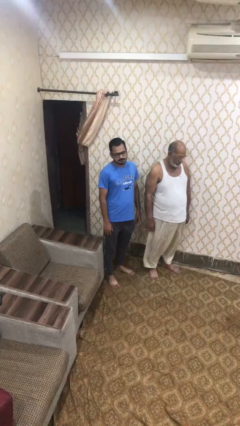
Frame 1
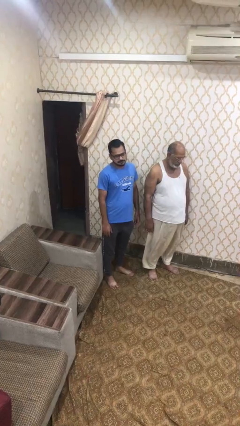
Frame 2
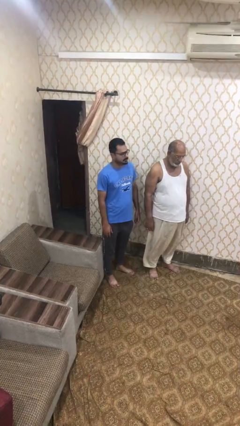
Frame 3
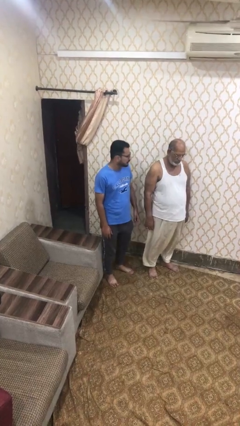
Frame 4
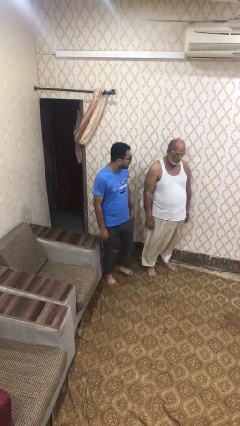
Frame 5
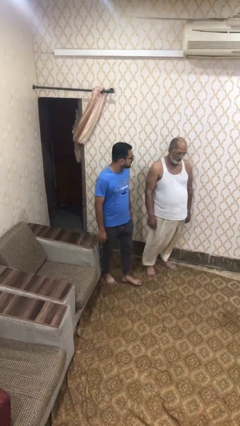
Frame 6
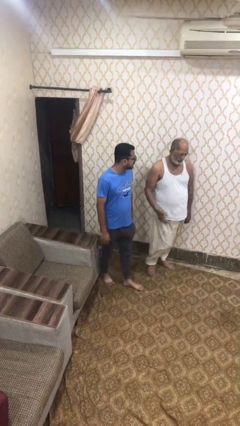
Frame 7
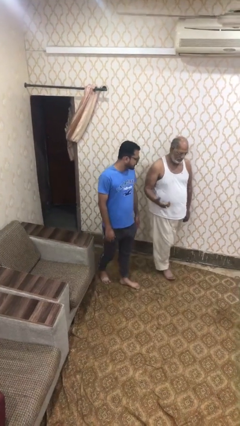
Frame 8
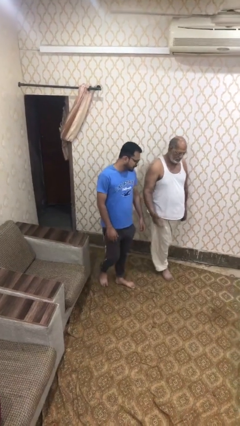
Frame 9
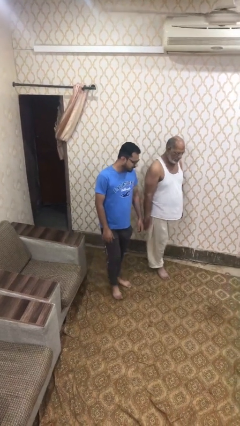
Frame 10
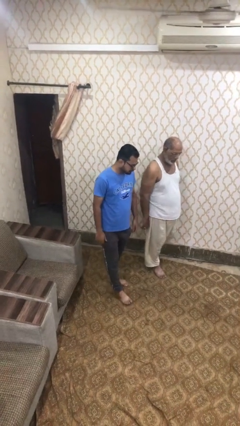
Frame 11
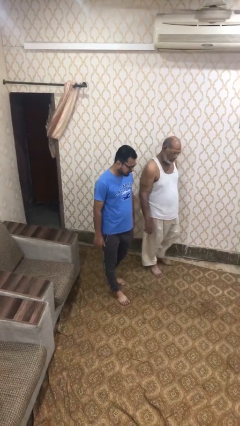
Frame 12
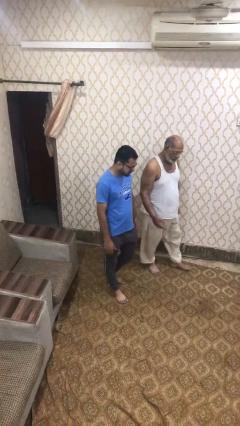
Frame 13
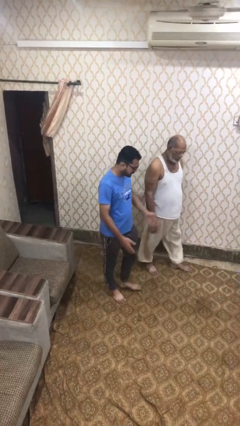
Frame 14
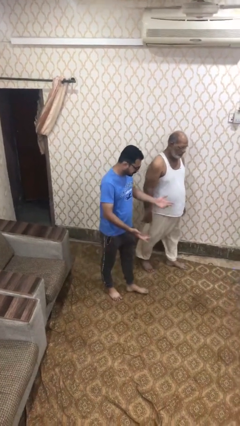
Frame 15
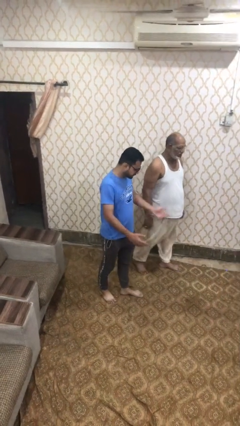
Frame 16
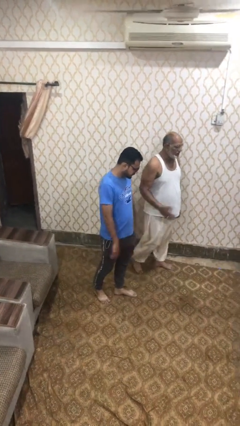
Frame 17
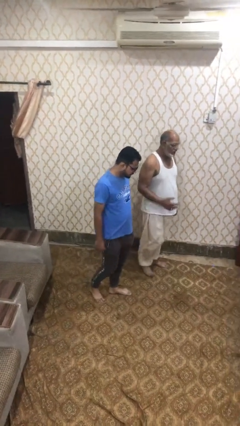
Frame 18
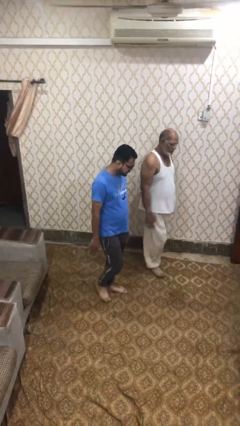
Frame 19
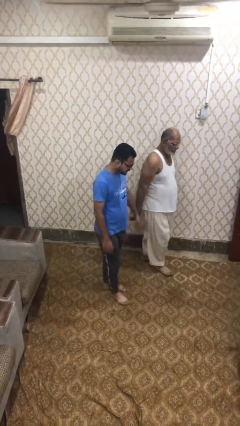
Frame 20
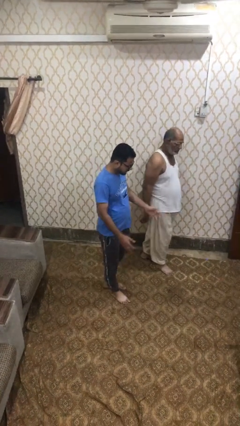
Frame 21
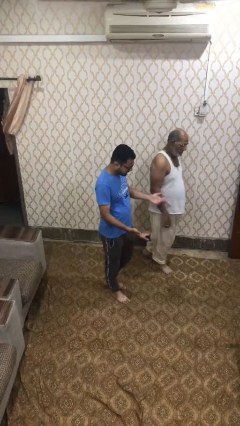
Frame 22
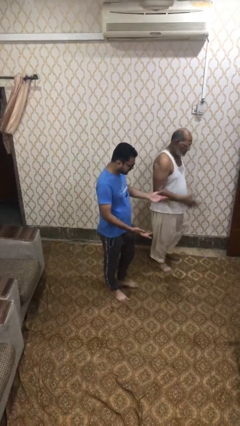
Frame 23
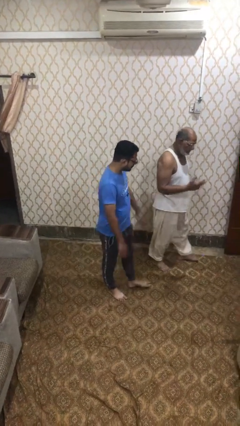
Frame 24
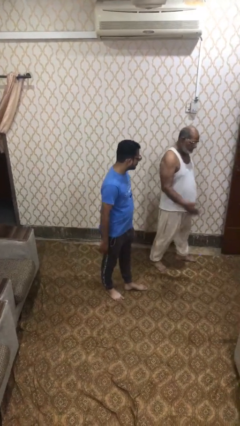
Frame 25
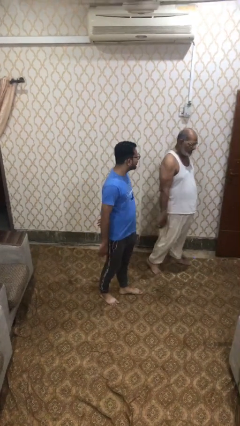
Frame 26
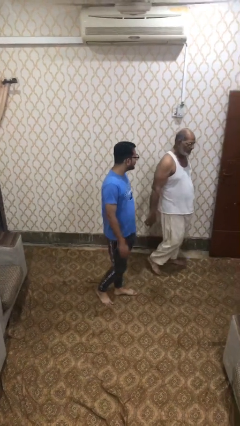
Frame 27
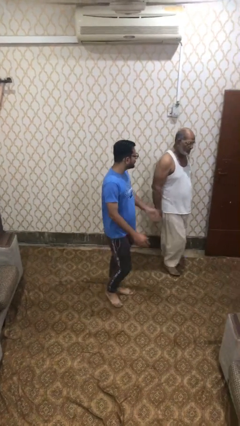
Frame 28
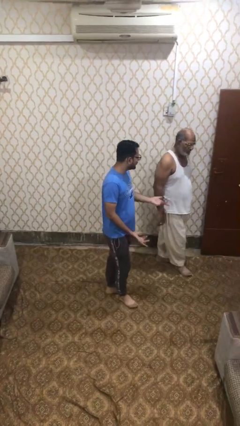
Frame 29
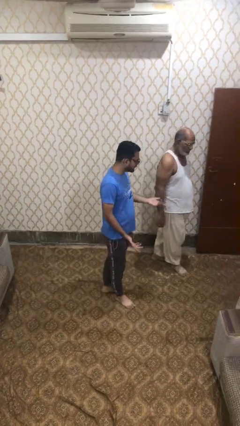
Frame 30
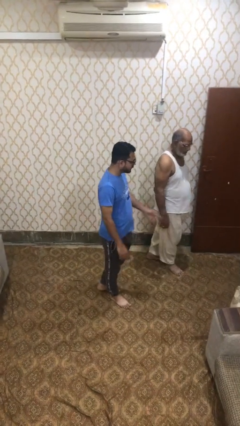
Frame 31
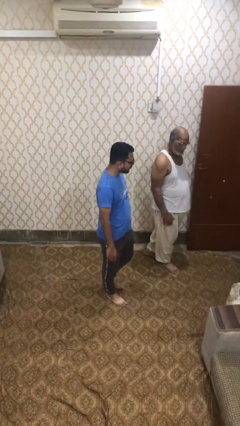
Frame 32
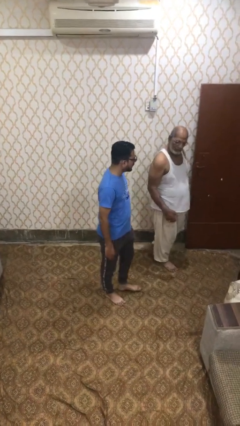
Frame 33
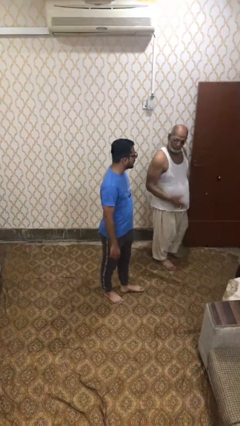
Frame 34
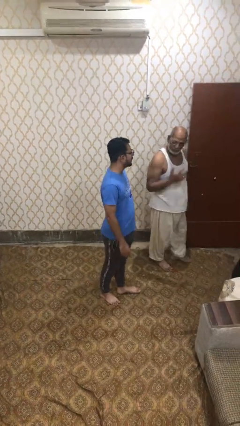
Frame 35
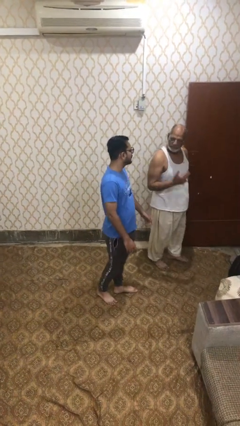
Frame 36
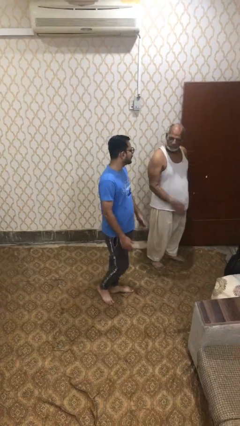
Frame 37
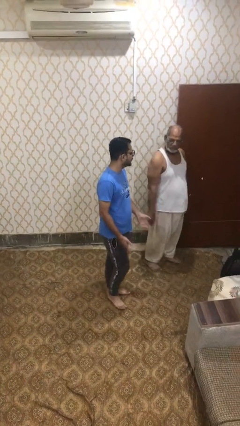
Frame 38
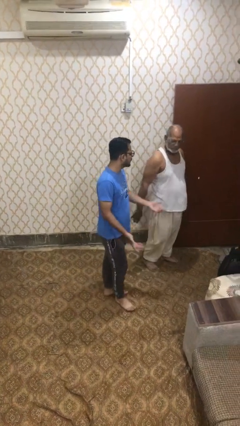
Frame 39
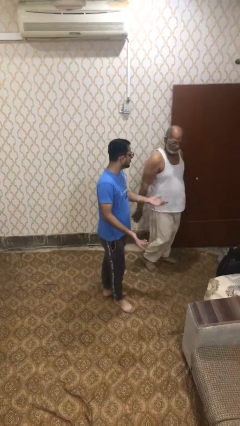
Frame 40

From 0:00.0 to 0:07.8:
person talks to person

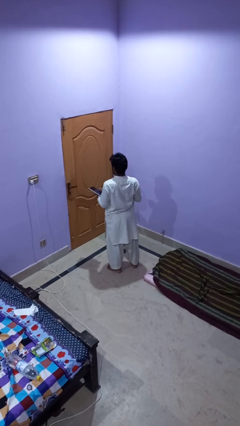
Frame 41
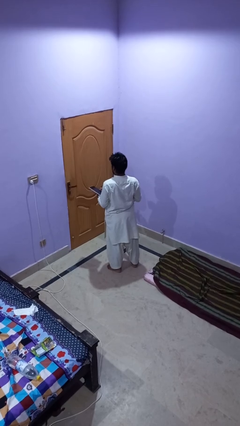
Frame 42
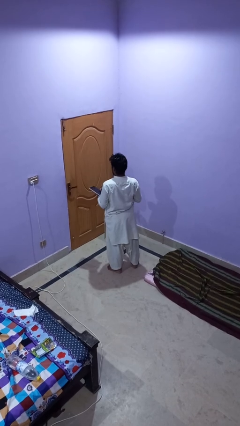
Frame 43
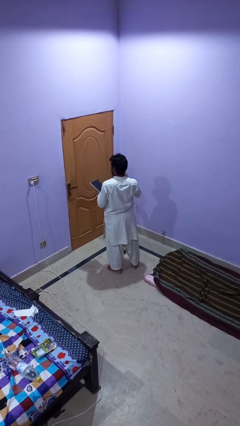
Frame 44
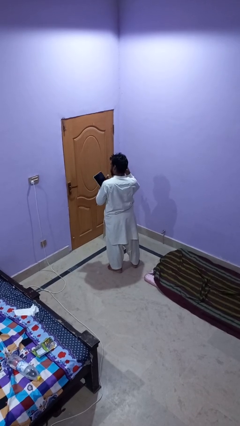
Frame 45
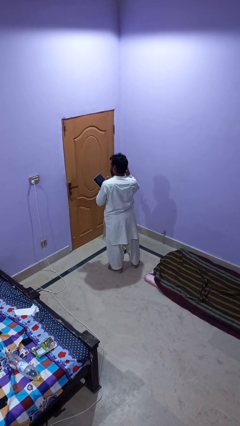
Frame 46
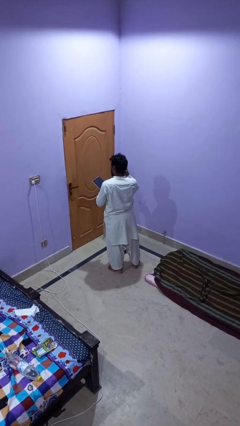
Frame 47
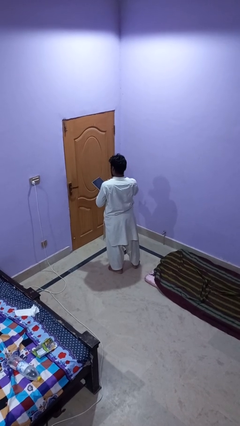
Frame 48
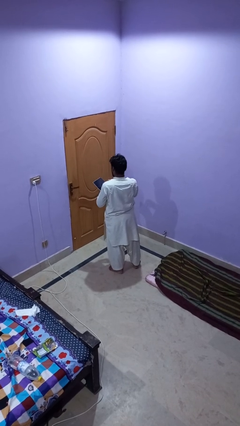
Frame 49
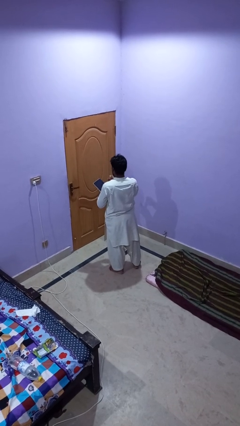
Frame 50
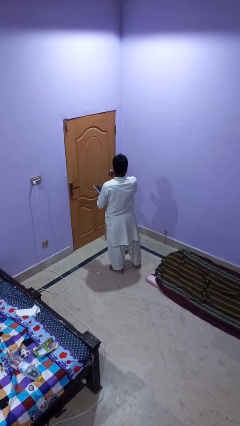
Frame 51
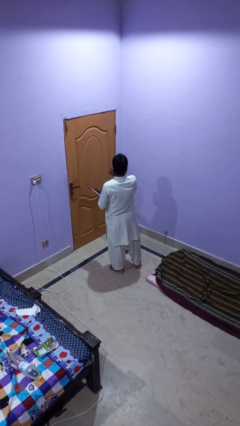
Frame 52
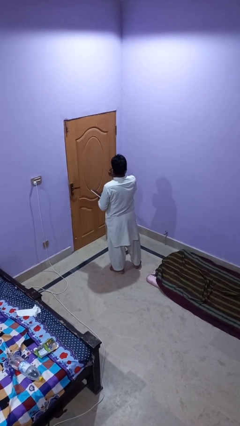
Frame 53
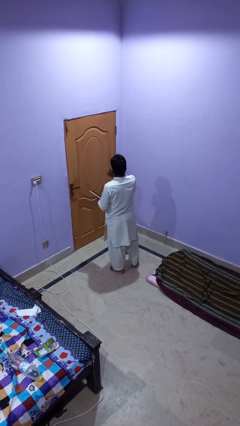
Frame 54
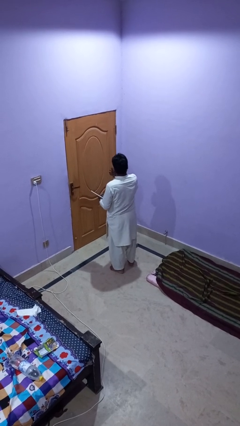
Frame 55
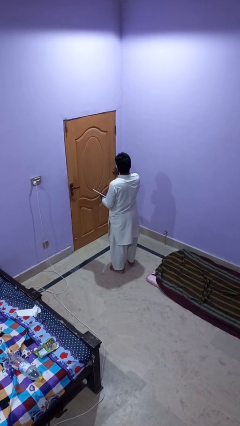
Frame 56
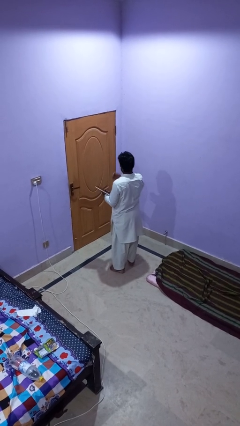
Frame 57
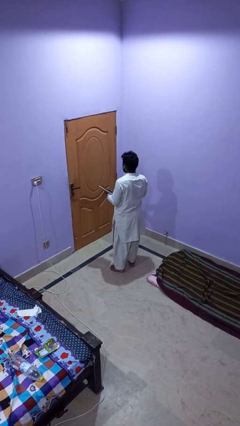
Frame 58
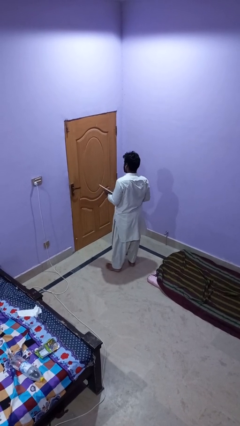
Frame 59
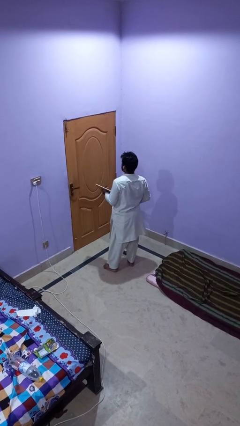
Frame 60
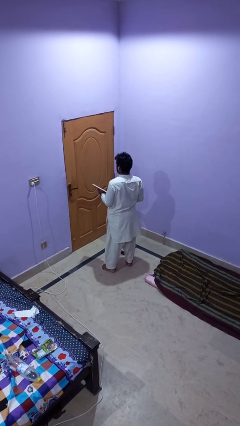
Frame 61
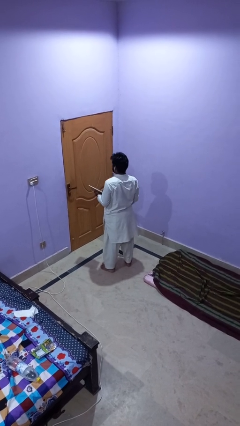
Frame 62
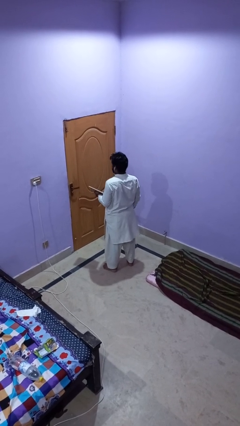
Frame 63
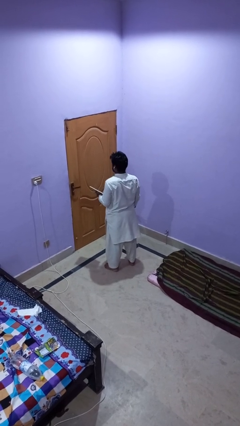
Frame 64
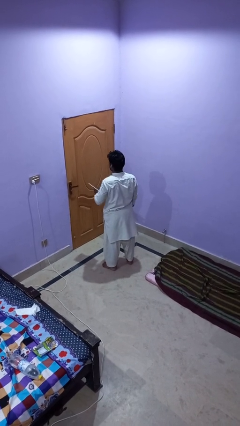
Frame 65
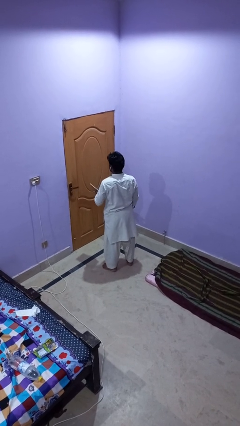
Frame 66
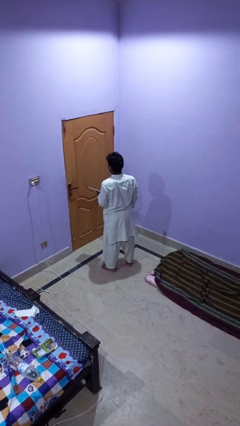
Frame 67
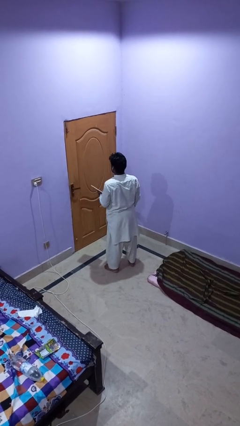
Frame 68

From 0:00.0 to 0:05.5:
person puts on headphones

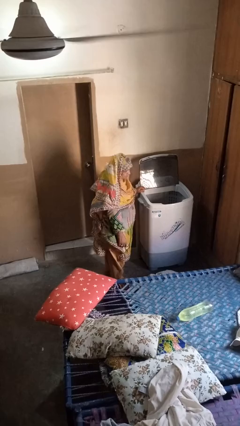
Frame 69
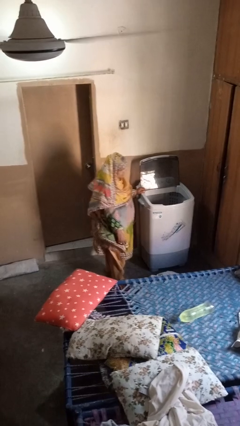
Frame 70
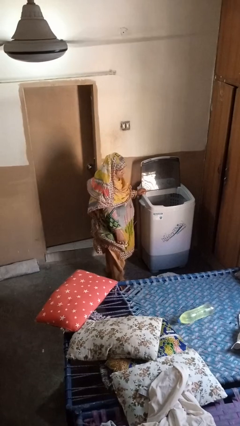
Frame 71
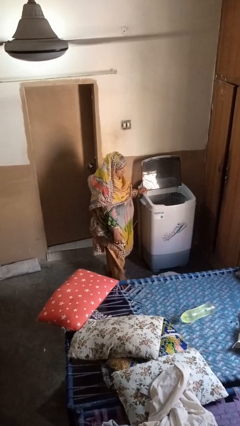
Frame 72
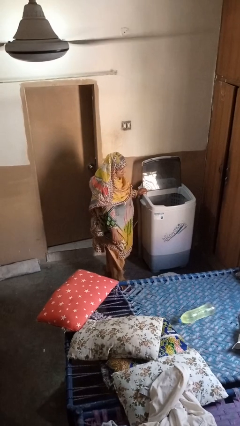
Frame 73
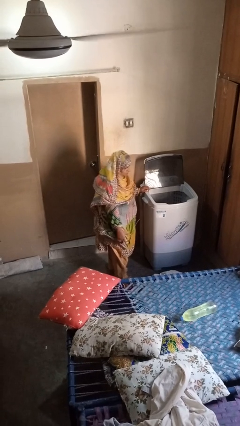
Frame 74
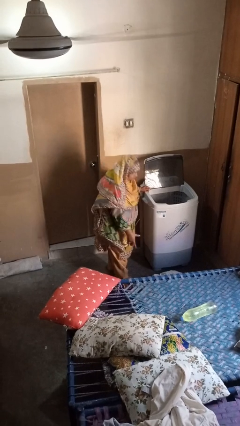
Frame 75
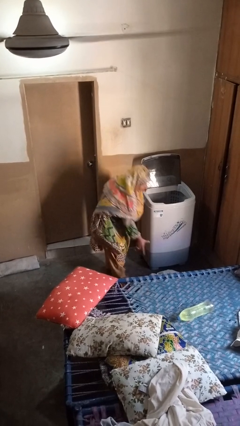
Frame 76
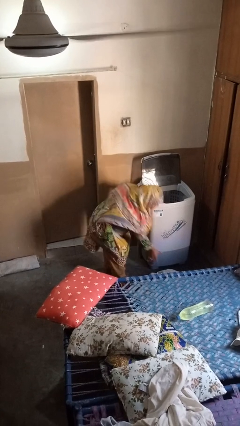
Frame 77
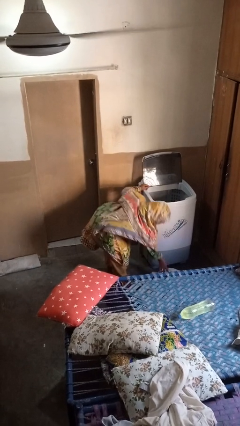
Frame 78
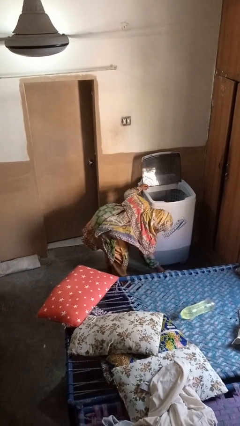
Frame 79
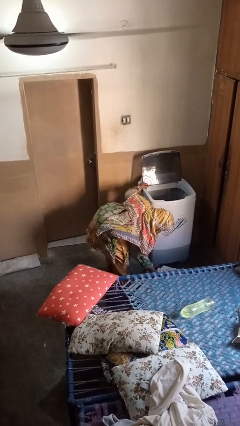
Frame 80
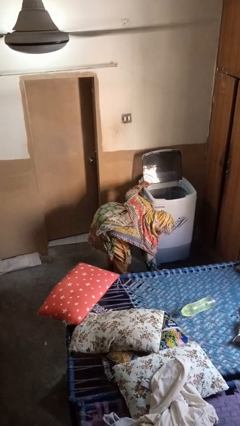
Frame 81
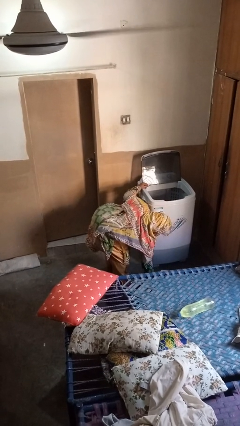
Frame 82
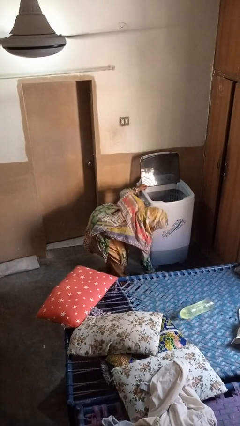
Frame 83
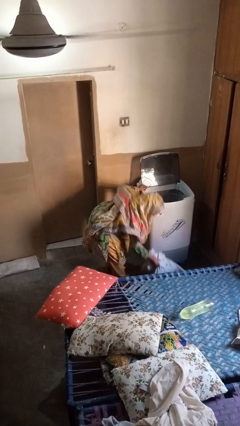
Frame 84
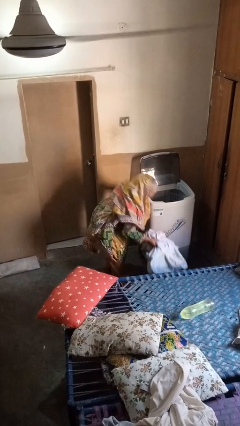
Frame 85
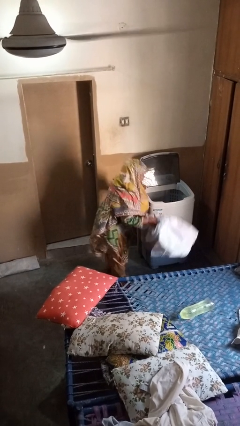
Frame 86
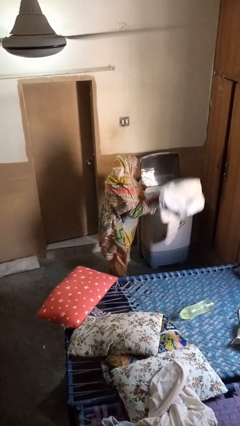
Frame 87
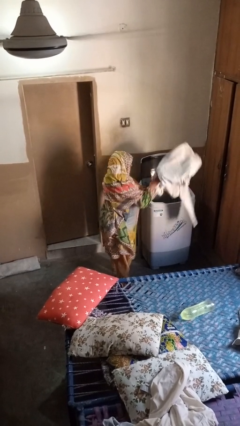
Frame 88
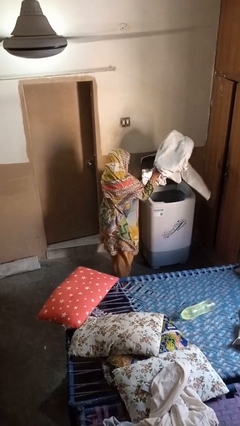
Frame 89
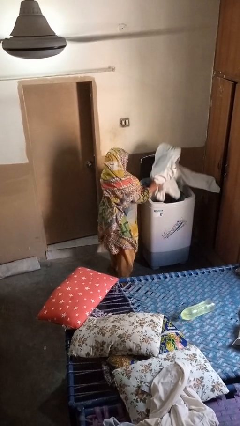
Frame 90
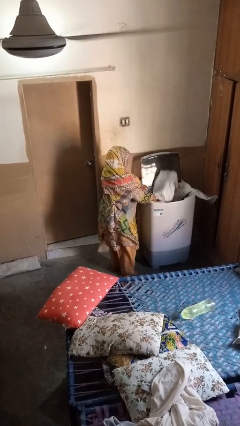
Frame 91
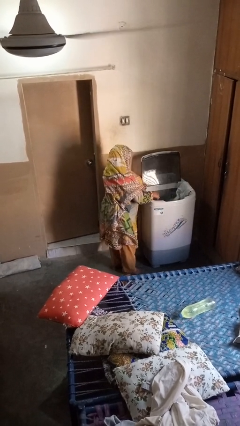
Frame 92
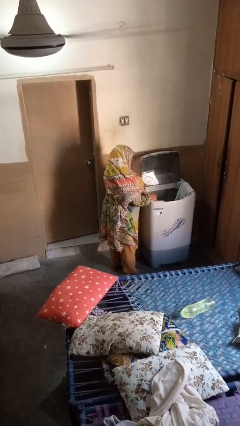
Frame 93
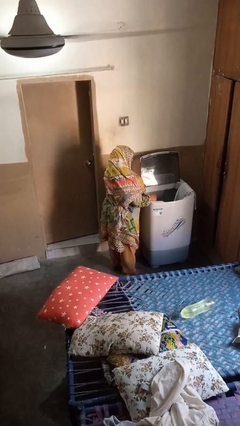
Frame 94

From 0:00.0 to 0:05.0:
person loads clotheswasher
